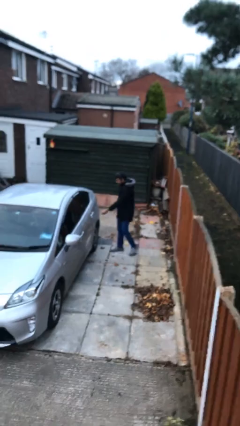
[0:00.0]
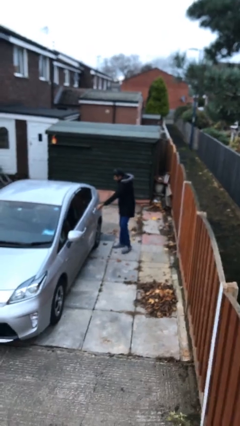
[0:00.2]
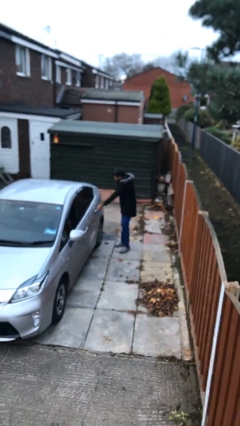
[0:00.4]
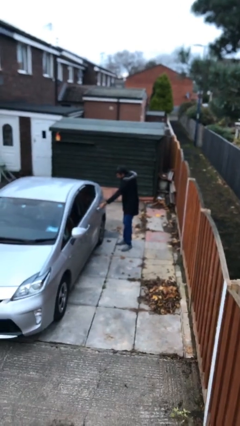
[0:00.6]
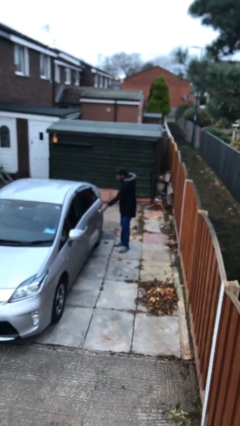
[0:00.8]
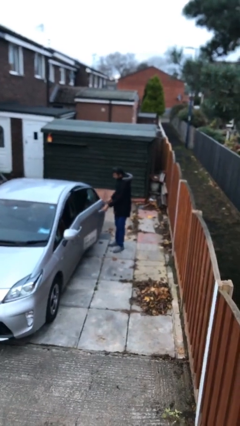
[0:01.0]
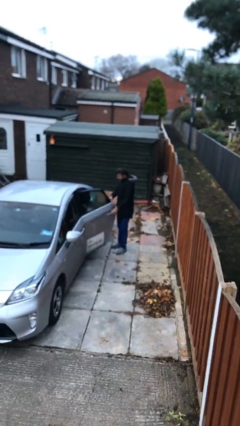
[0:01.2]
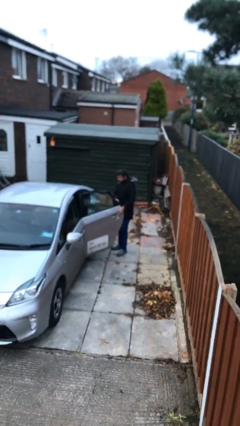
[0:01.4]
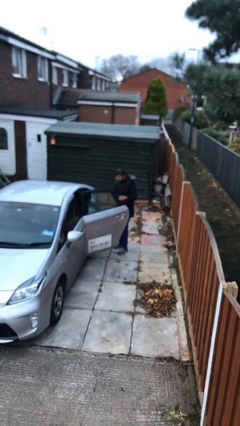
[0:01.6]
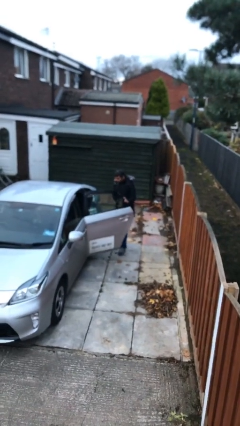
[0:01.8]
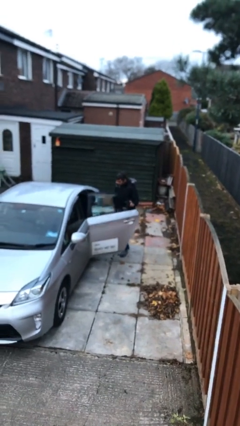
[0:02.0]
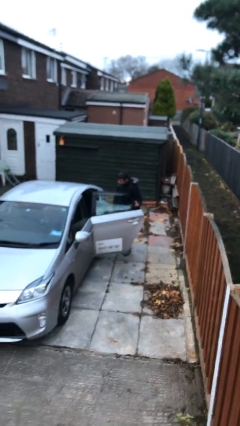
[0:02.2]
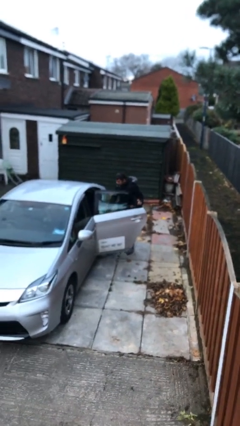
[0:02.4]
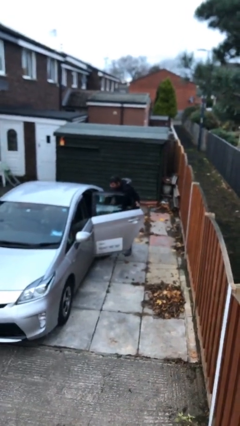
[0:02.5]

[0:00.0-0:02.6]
person opens car door

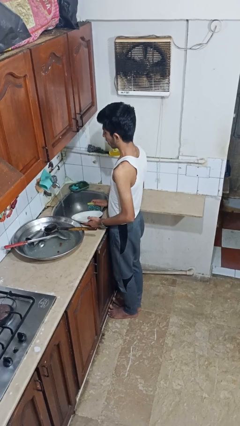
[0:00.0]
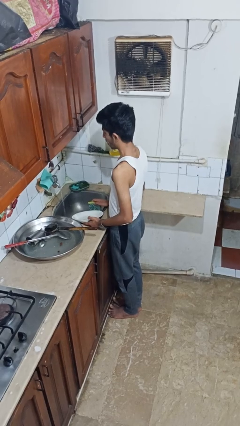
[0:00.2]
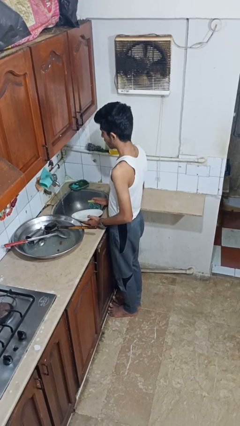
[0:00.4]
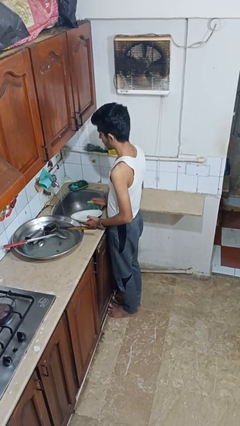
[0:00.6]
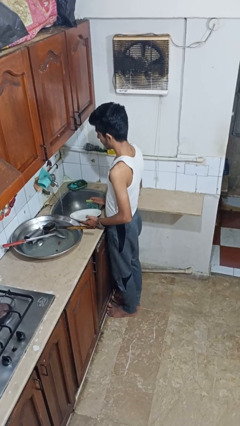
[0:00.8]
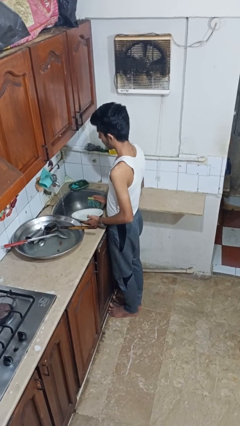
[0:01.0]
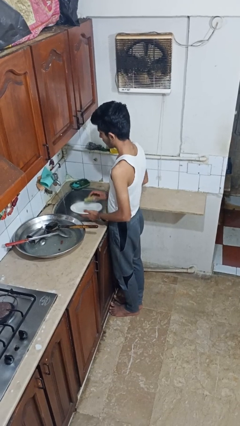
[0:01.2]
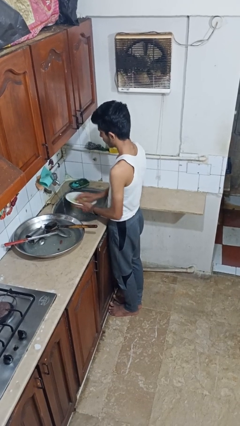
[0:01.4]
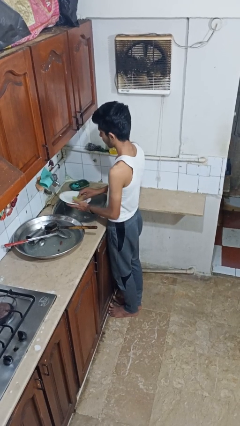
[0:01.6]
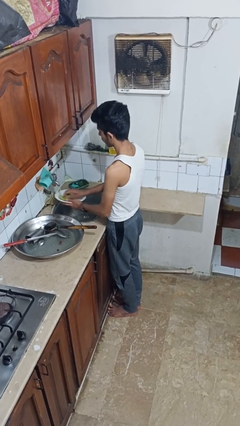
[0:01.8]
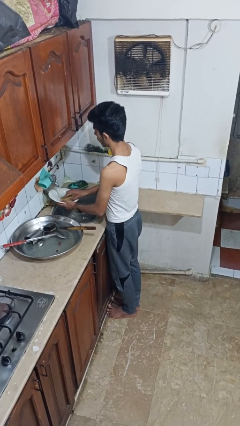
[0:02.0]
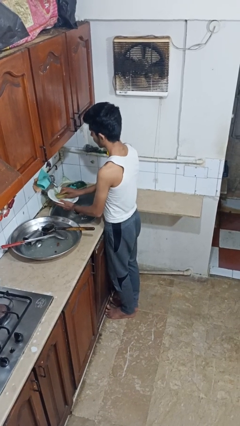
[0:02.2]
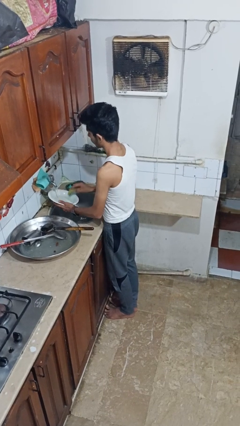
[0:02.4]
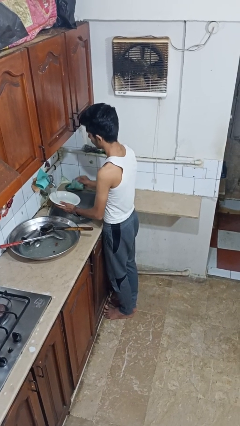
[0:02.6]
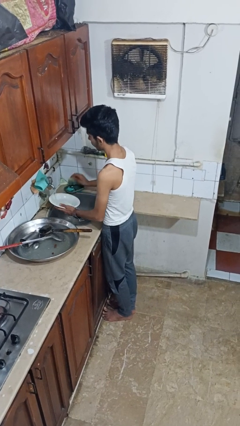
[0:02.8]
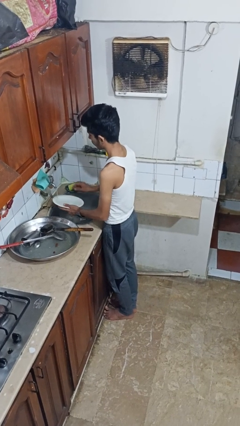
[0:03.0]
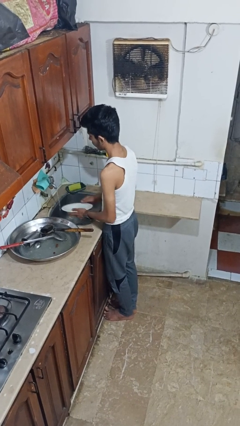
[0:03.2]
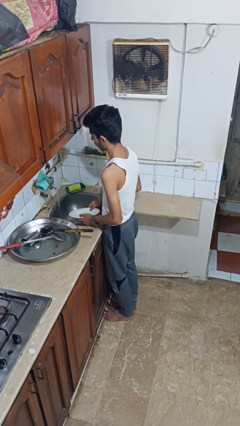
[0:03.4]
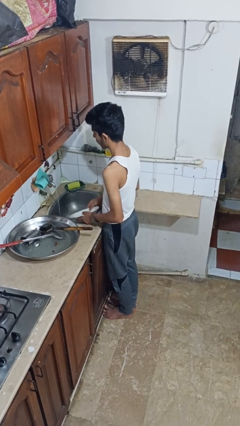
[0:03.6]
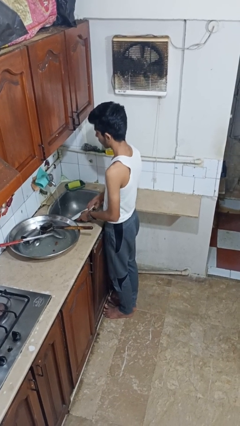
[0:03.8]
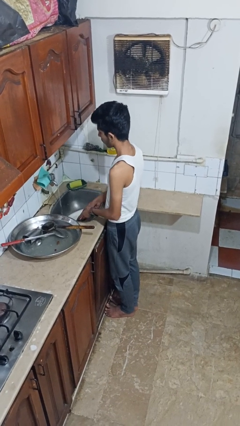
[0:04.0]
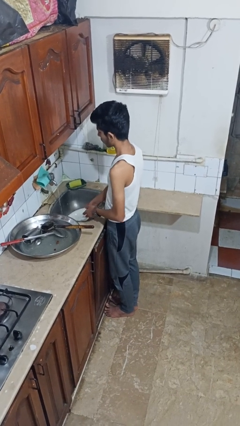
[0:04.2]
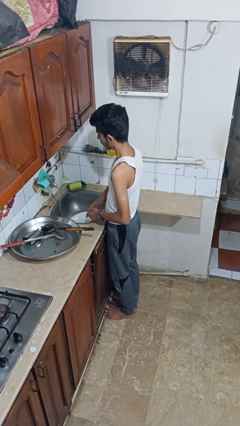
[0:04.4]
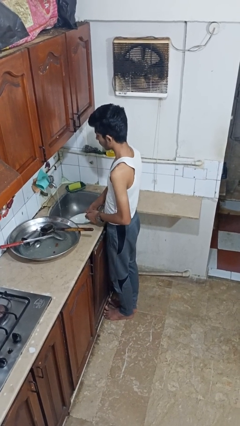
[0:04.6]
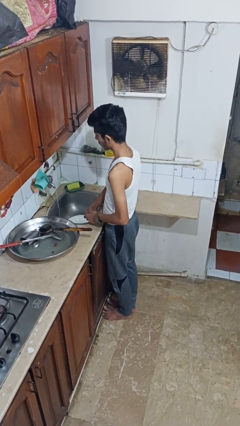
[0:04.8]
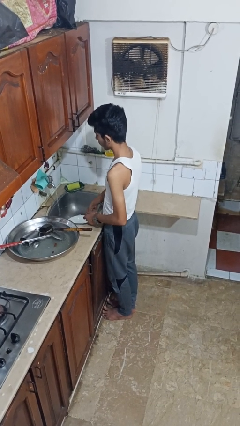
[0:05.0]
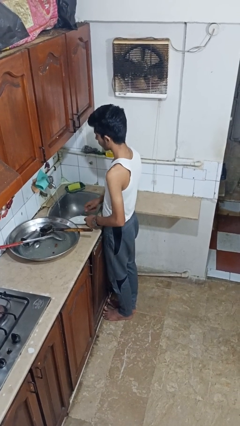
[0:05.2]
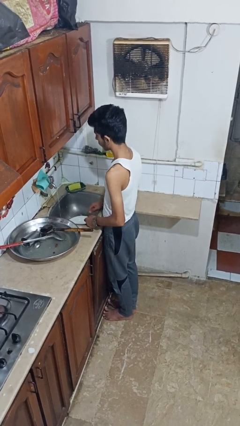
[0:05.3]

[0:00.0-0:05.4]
person washes dish

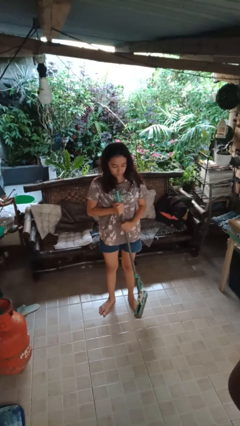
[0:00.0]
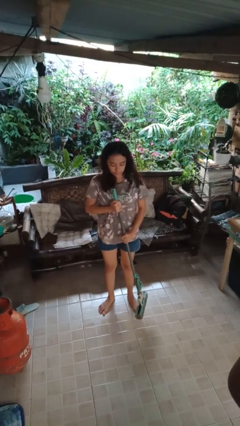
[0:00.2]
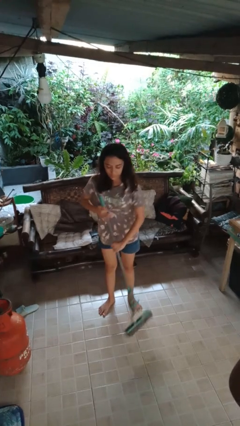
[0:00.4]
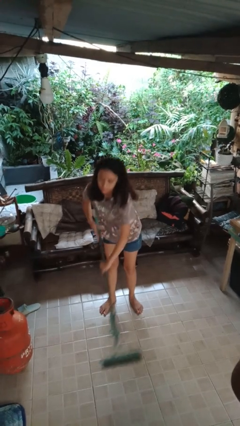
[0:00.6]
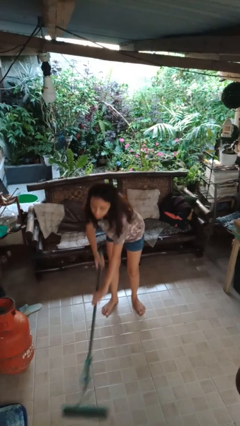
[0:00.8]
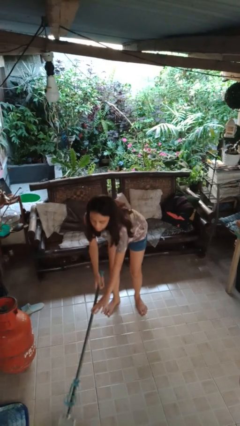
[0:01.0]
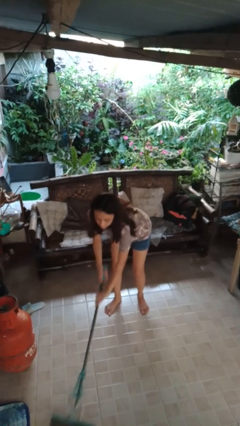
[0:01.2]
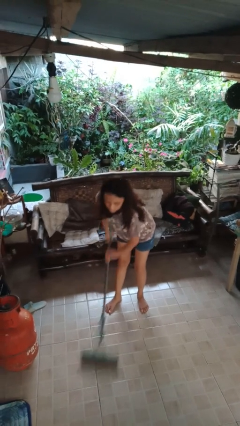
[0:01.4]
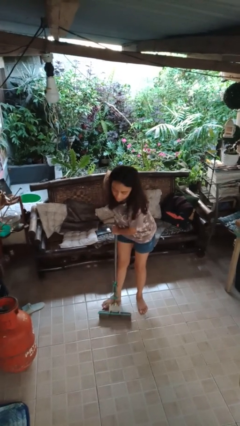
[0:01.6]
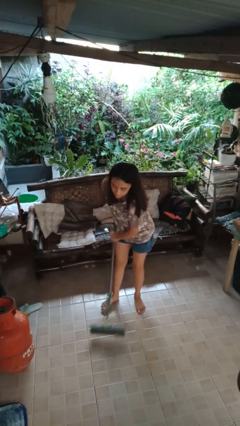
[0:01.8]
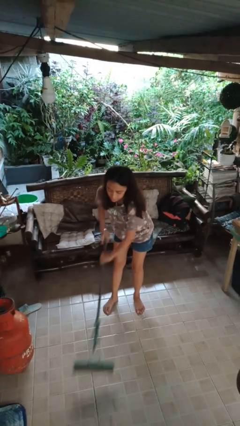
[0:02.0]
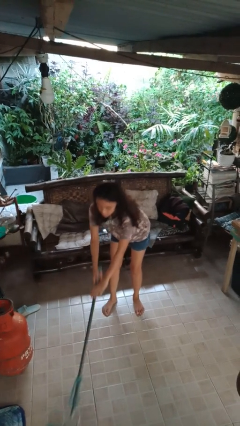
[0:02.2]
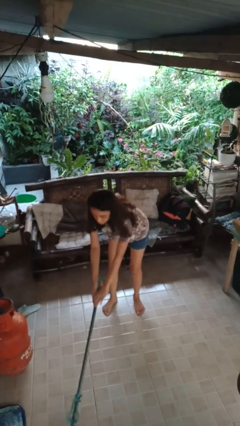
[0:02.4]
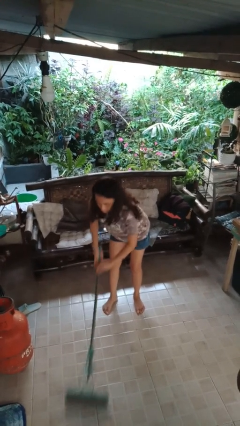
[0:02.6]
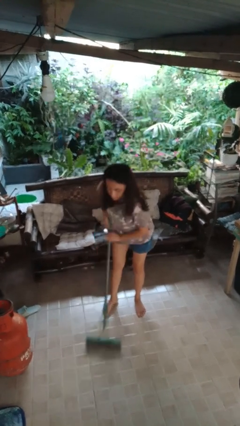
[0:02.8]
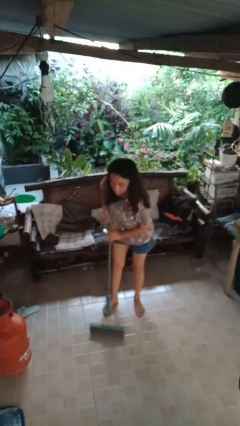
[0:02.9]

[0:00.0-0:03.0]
person mops

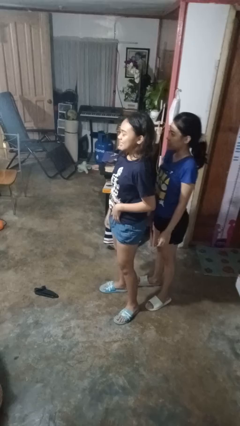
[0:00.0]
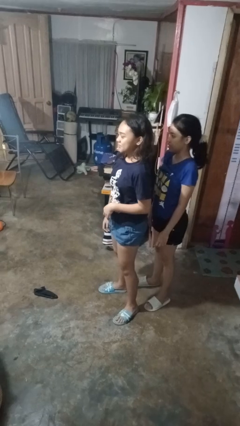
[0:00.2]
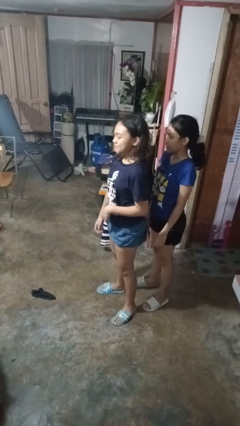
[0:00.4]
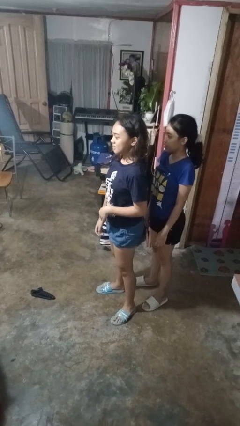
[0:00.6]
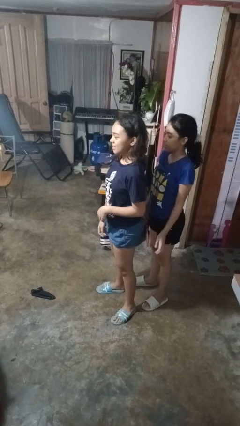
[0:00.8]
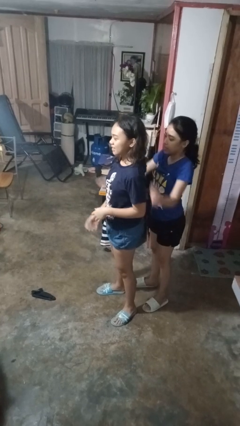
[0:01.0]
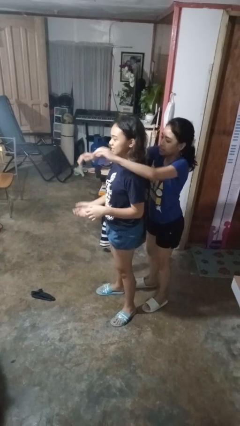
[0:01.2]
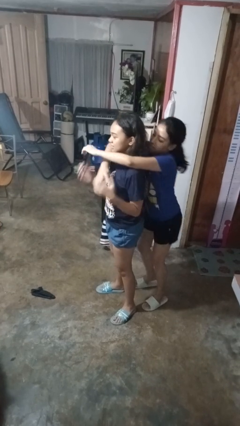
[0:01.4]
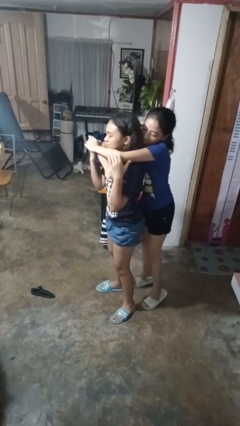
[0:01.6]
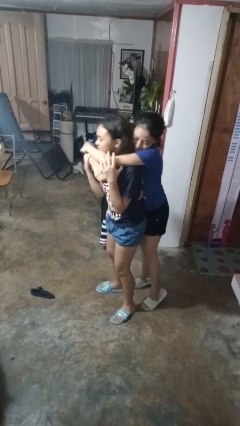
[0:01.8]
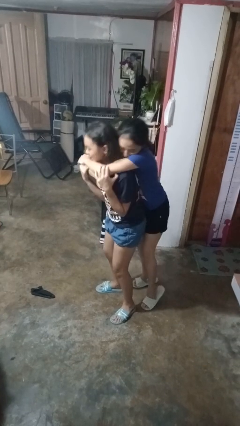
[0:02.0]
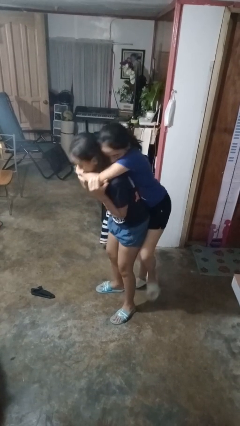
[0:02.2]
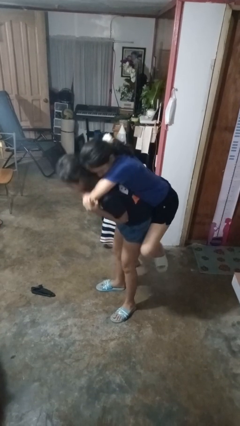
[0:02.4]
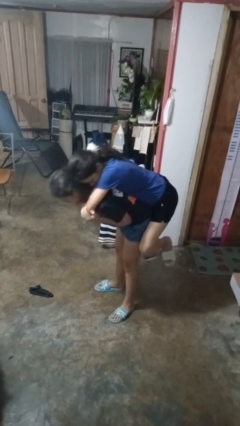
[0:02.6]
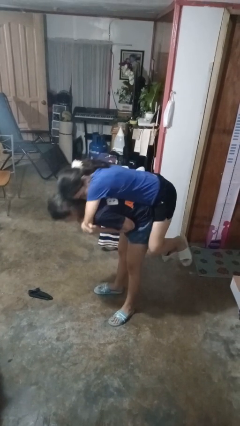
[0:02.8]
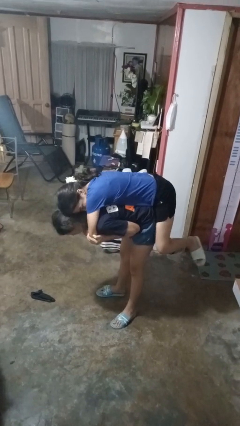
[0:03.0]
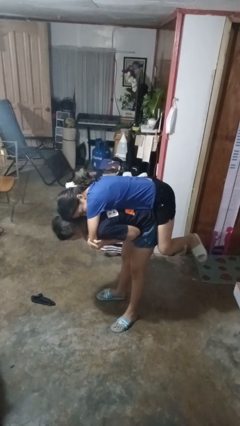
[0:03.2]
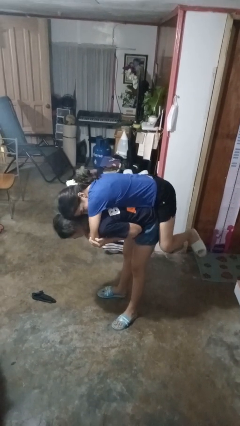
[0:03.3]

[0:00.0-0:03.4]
person picks up person

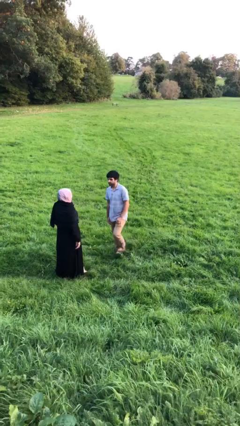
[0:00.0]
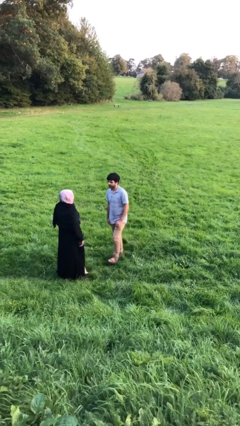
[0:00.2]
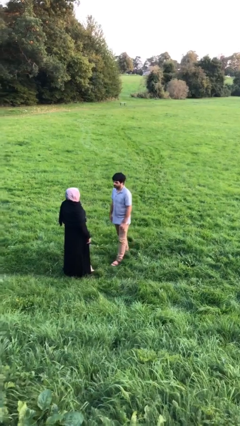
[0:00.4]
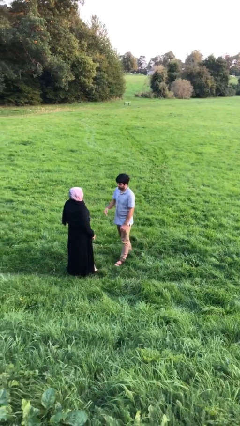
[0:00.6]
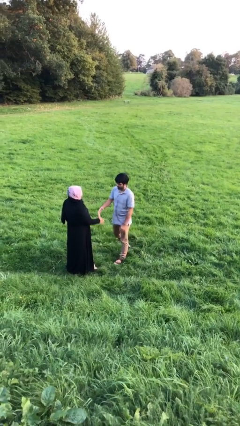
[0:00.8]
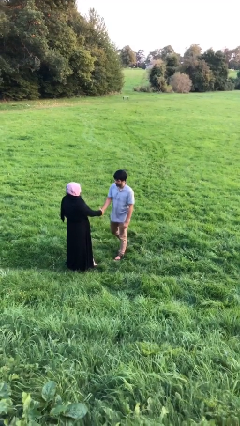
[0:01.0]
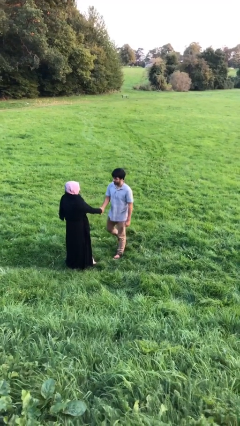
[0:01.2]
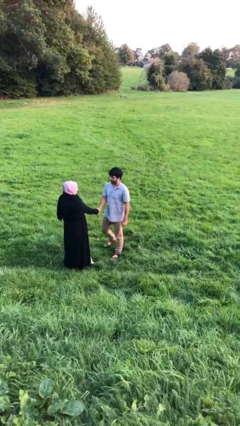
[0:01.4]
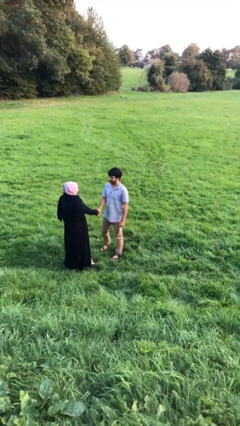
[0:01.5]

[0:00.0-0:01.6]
person shakes hand

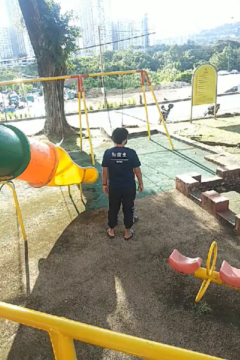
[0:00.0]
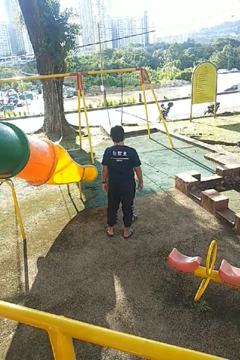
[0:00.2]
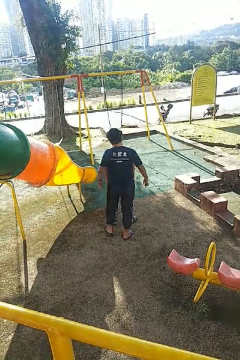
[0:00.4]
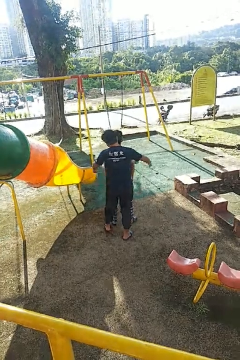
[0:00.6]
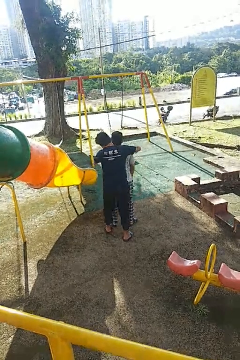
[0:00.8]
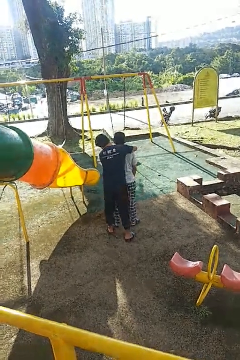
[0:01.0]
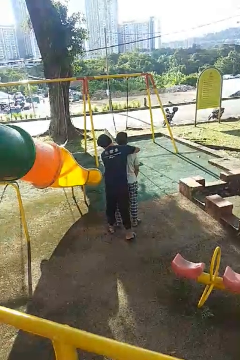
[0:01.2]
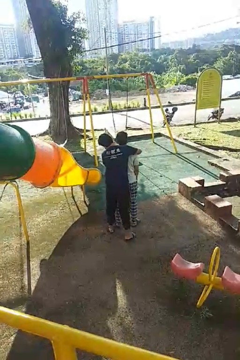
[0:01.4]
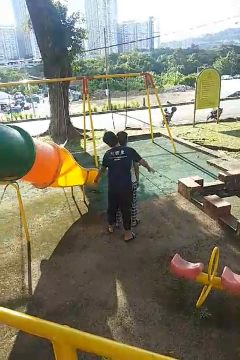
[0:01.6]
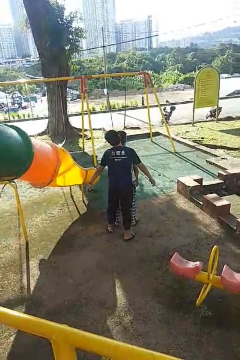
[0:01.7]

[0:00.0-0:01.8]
person hugs person from behind
